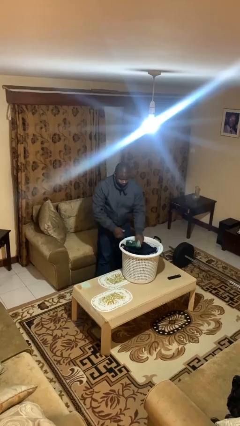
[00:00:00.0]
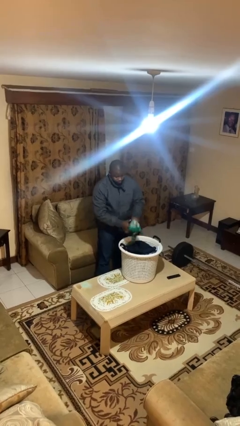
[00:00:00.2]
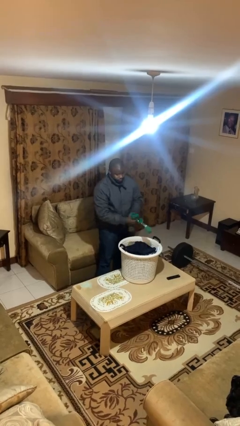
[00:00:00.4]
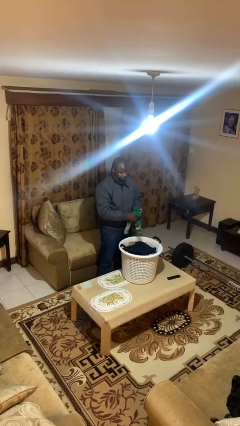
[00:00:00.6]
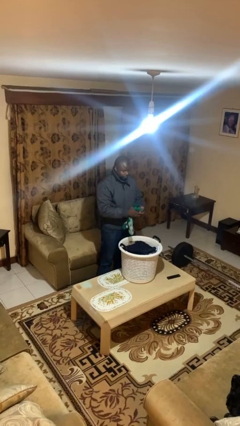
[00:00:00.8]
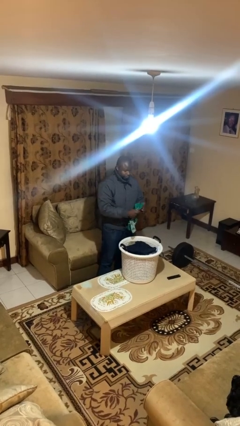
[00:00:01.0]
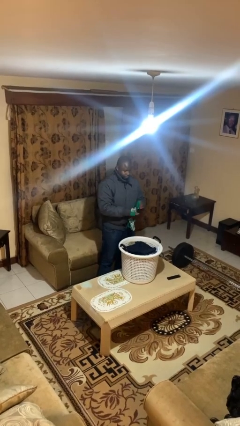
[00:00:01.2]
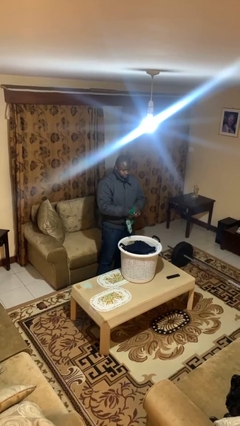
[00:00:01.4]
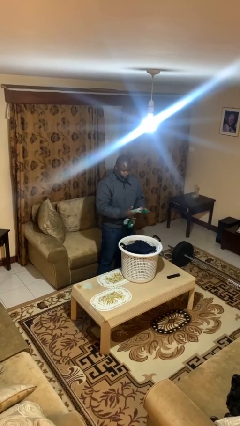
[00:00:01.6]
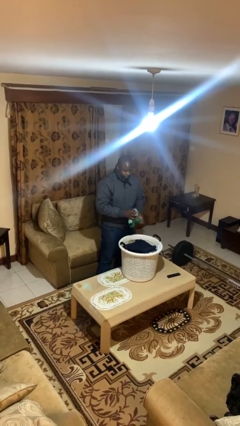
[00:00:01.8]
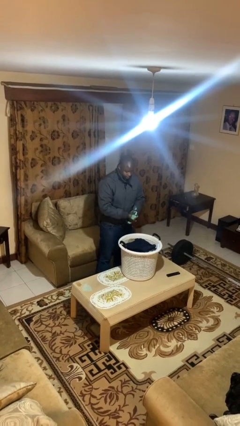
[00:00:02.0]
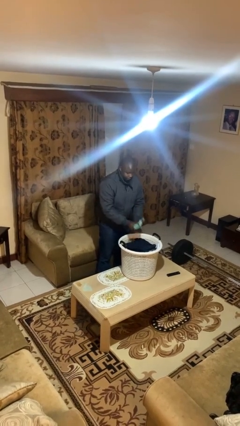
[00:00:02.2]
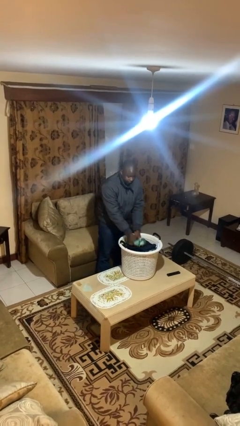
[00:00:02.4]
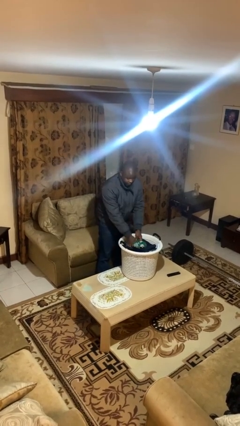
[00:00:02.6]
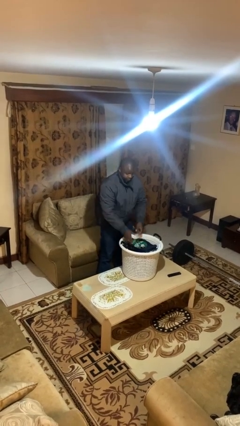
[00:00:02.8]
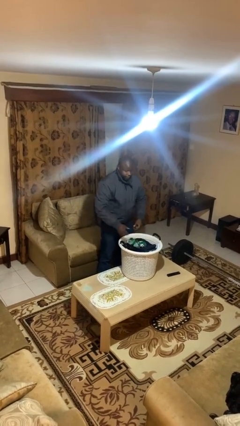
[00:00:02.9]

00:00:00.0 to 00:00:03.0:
person folds socks

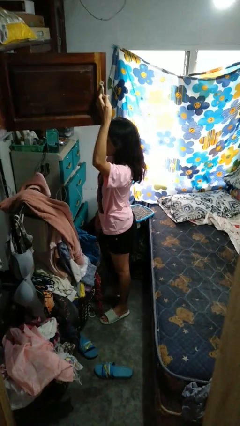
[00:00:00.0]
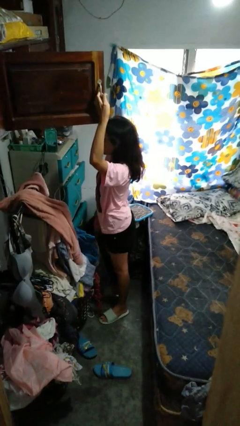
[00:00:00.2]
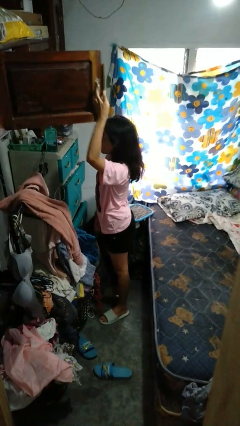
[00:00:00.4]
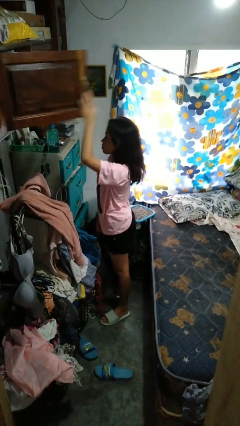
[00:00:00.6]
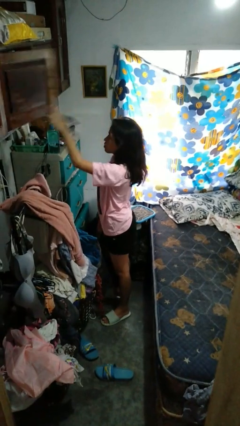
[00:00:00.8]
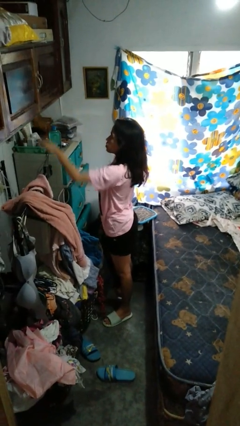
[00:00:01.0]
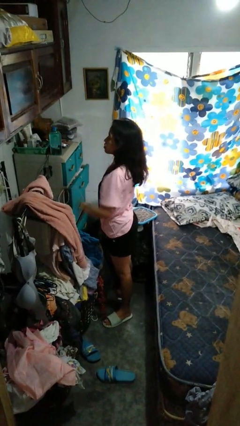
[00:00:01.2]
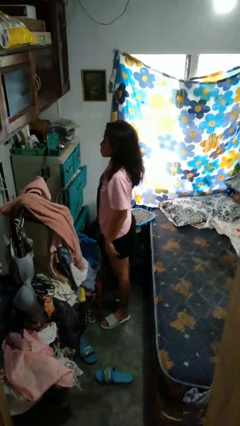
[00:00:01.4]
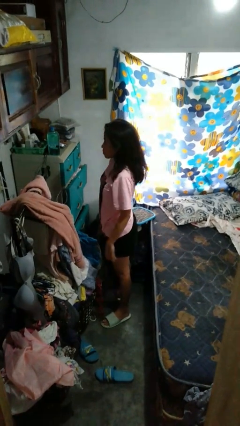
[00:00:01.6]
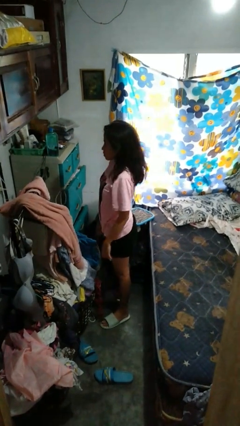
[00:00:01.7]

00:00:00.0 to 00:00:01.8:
person closes closet door

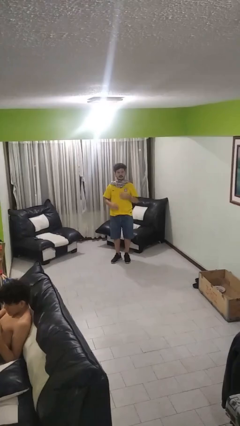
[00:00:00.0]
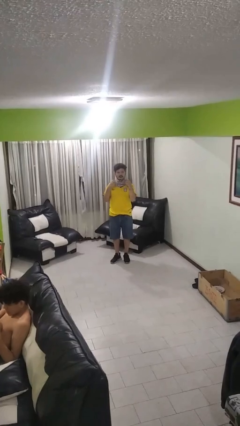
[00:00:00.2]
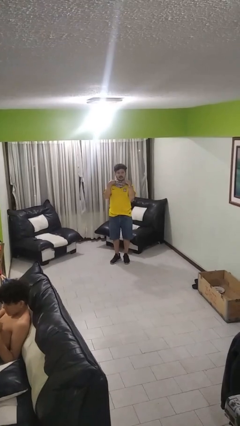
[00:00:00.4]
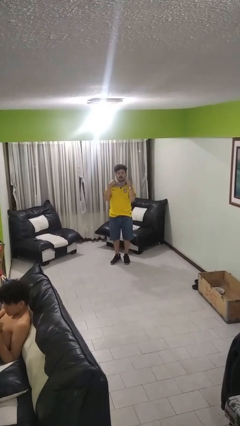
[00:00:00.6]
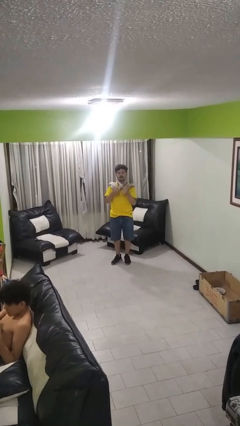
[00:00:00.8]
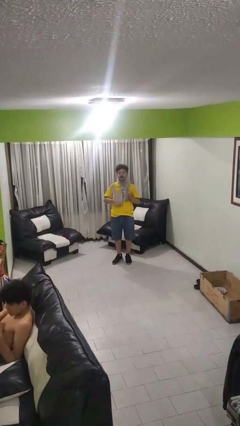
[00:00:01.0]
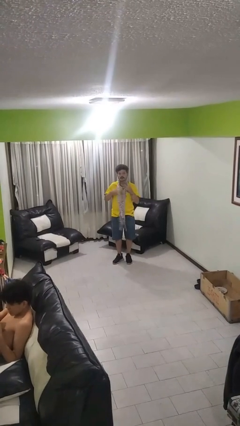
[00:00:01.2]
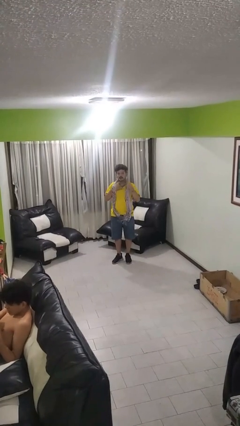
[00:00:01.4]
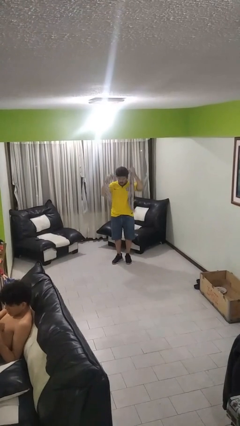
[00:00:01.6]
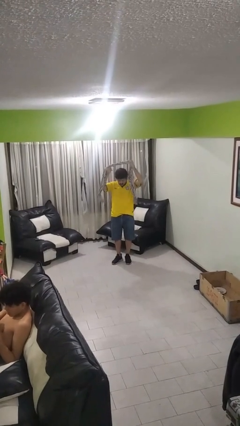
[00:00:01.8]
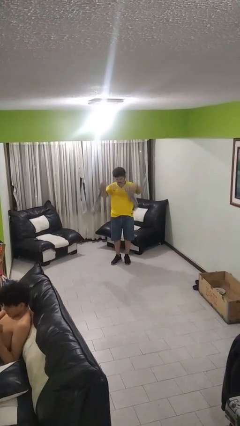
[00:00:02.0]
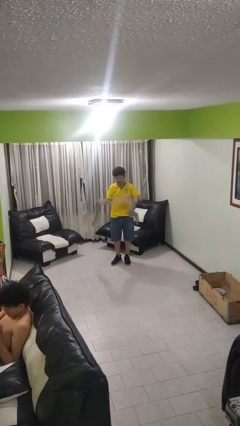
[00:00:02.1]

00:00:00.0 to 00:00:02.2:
person takes off scarf

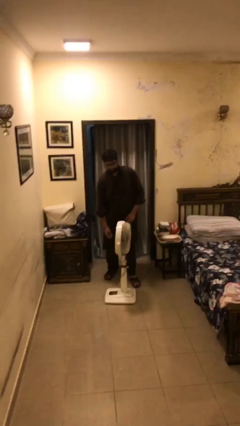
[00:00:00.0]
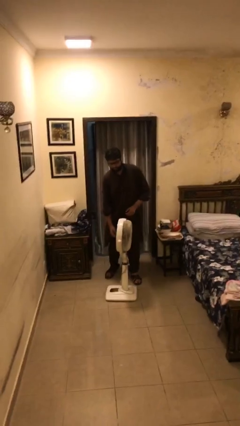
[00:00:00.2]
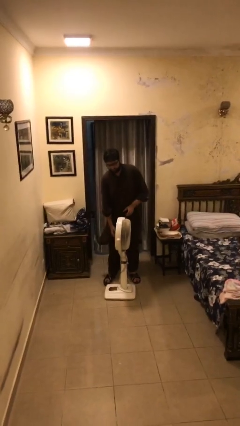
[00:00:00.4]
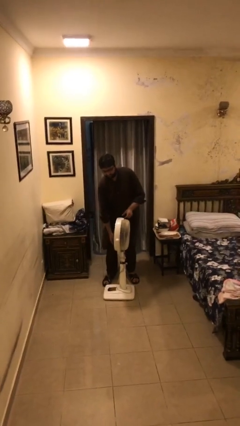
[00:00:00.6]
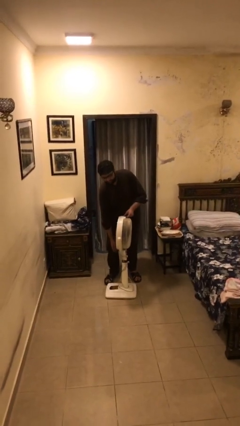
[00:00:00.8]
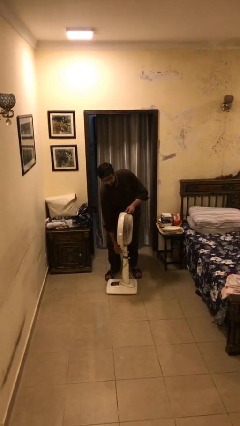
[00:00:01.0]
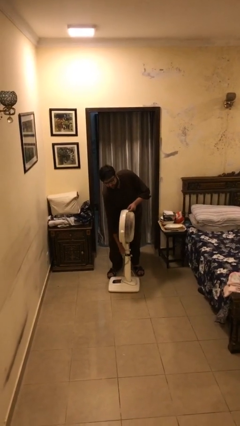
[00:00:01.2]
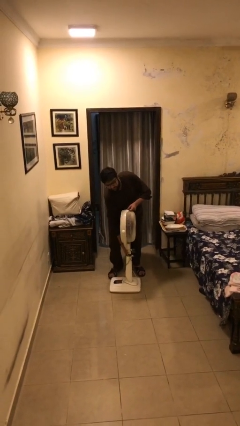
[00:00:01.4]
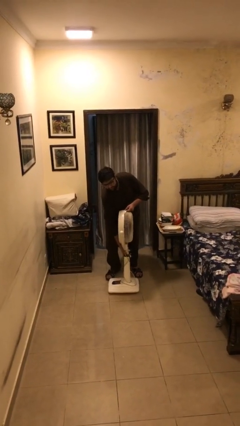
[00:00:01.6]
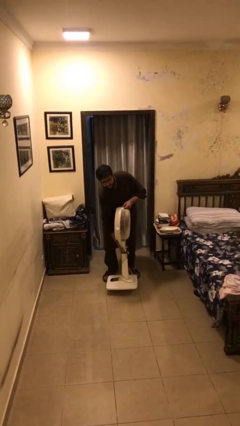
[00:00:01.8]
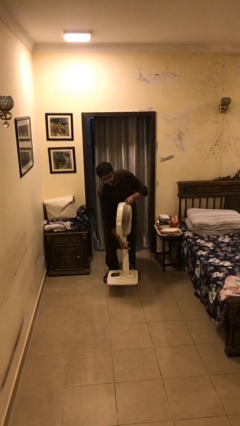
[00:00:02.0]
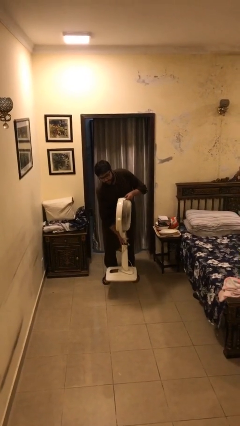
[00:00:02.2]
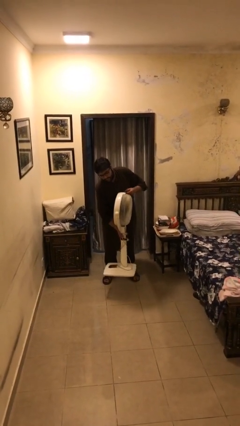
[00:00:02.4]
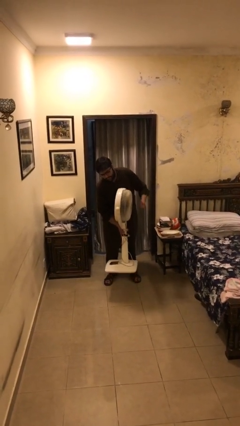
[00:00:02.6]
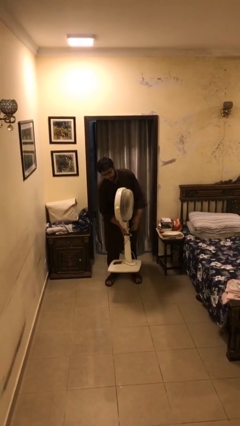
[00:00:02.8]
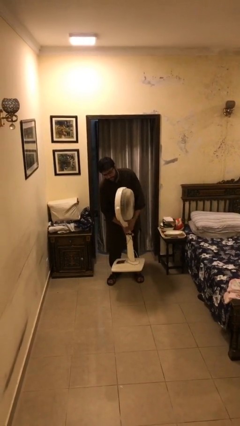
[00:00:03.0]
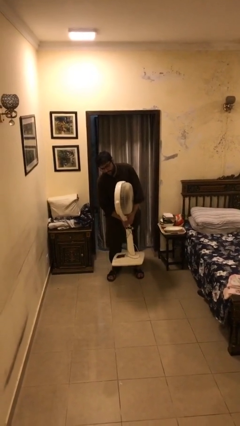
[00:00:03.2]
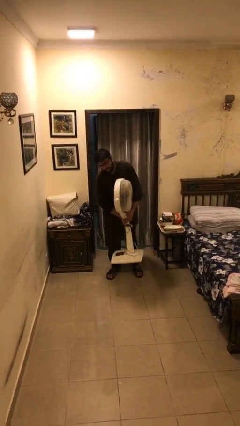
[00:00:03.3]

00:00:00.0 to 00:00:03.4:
person picks up object from floor

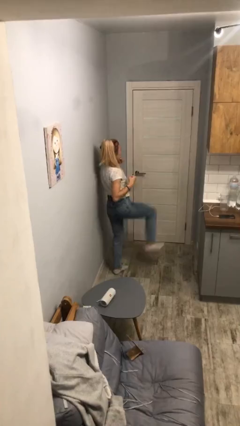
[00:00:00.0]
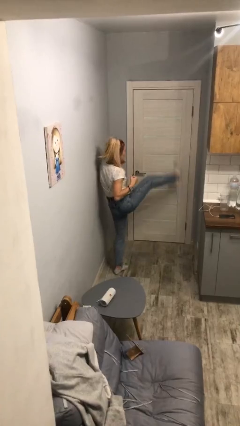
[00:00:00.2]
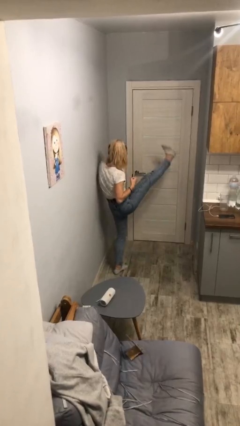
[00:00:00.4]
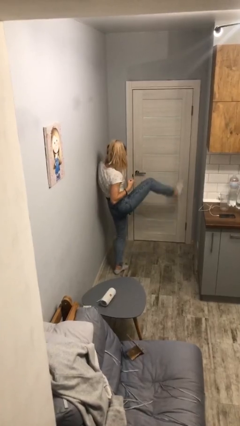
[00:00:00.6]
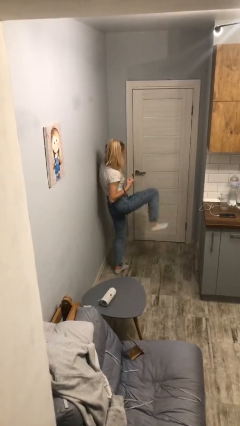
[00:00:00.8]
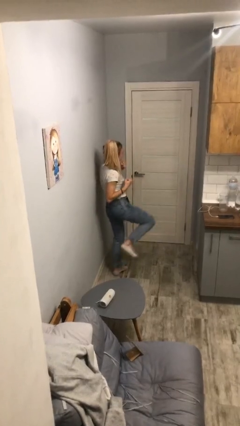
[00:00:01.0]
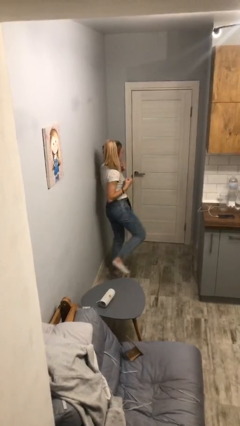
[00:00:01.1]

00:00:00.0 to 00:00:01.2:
person karate kicks

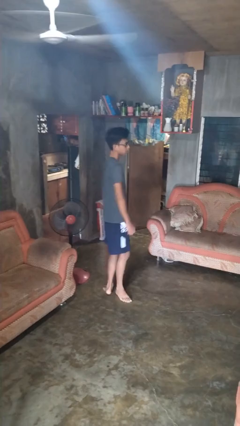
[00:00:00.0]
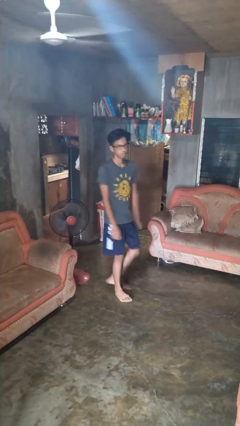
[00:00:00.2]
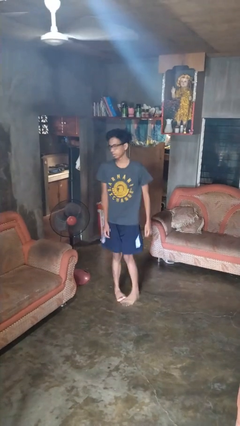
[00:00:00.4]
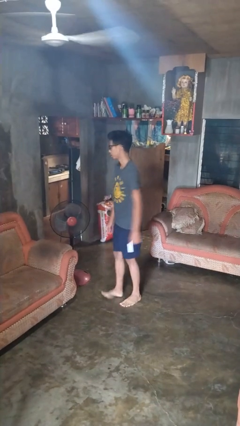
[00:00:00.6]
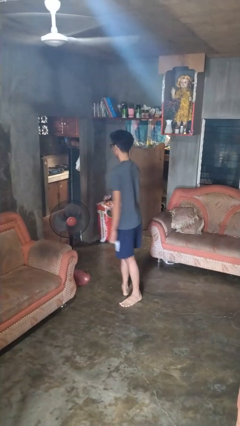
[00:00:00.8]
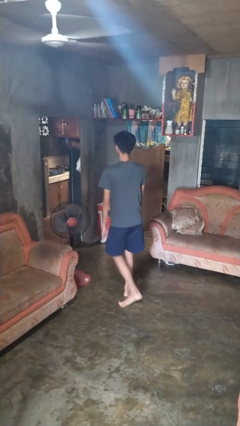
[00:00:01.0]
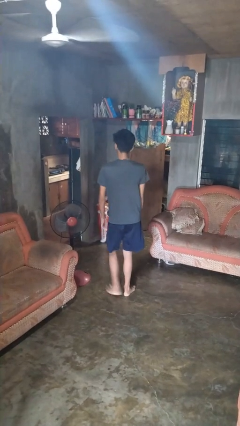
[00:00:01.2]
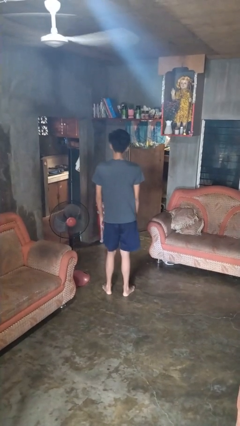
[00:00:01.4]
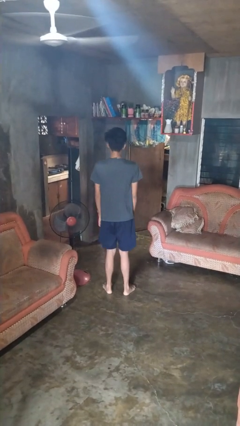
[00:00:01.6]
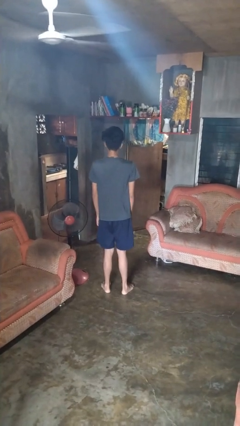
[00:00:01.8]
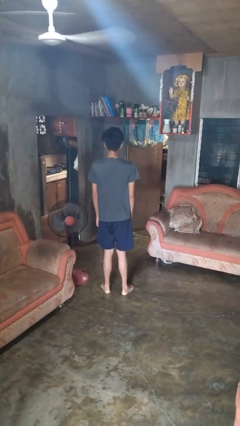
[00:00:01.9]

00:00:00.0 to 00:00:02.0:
person twirls

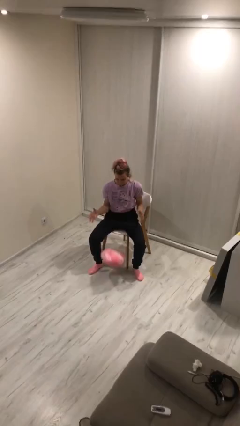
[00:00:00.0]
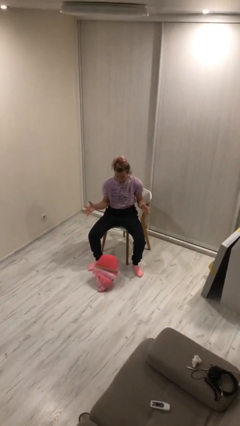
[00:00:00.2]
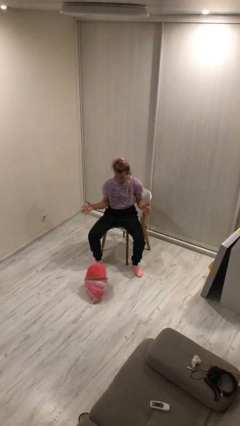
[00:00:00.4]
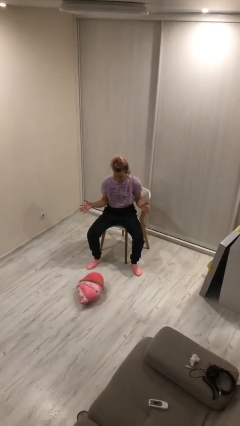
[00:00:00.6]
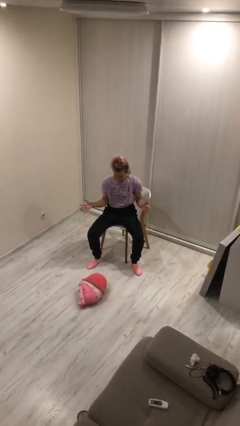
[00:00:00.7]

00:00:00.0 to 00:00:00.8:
person drops object
